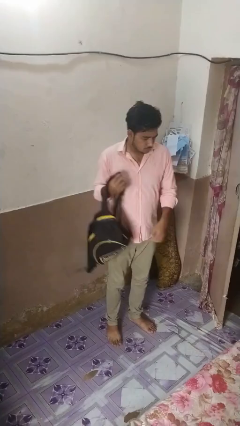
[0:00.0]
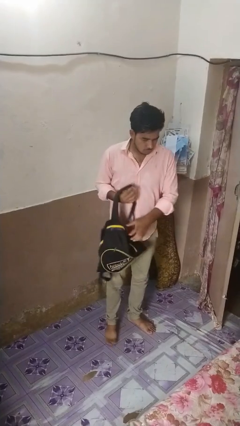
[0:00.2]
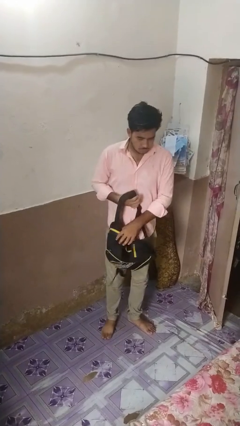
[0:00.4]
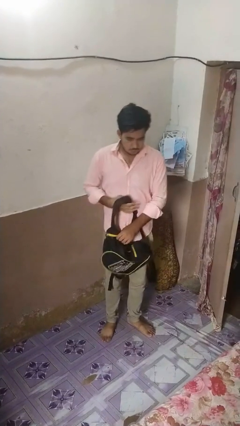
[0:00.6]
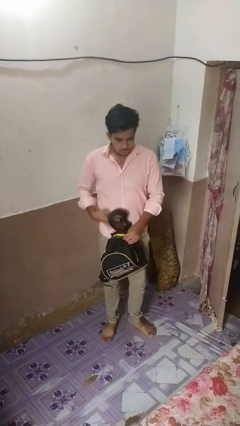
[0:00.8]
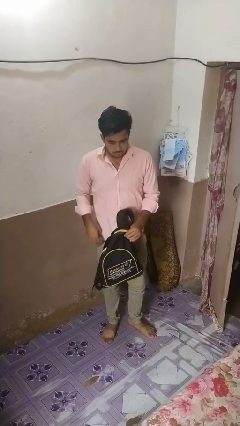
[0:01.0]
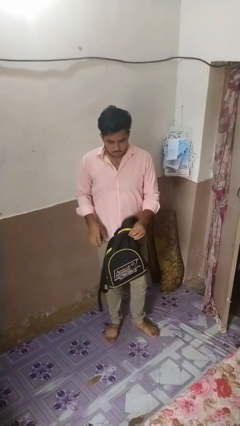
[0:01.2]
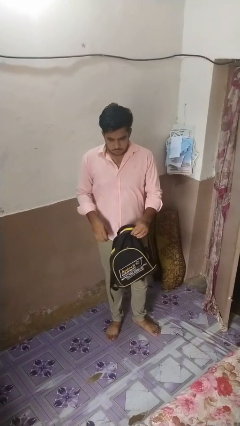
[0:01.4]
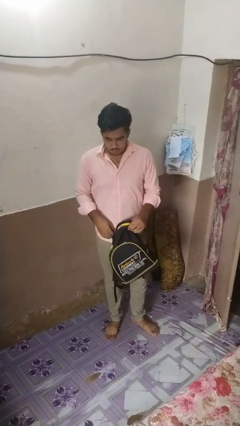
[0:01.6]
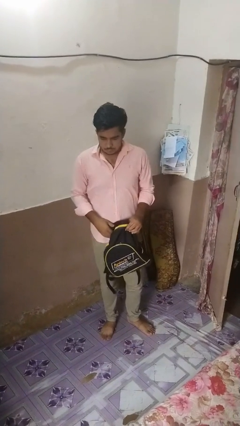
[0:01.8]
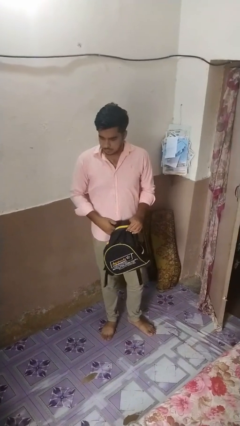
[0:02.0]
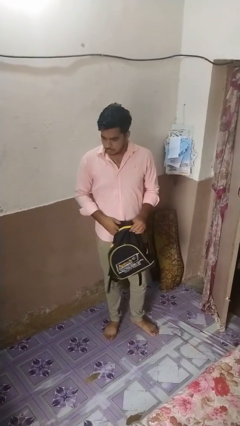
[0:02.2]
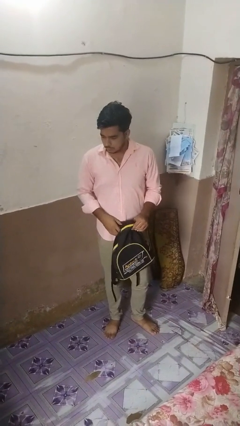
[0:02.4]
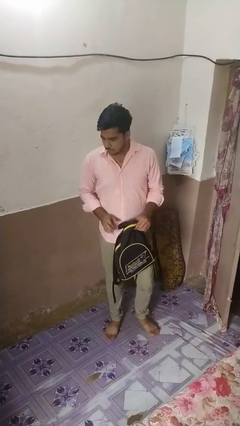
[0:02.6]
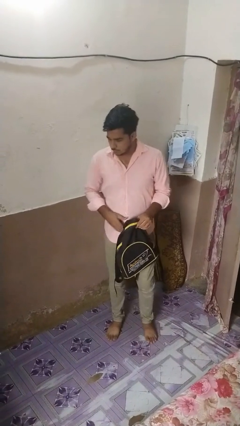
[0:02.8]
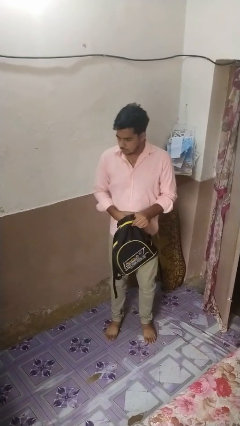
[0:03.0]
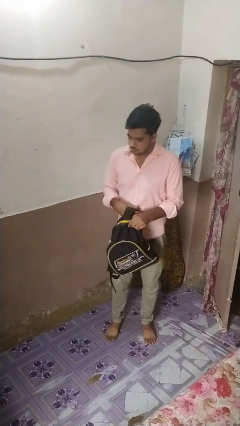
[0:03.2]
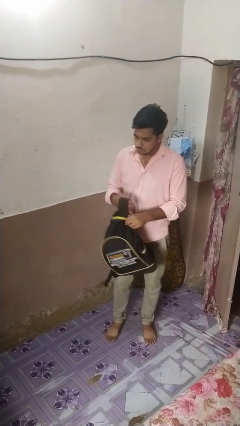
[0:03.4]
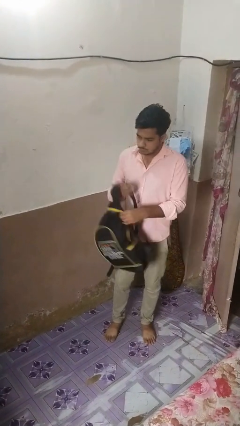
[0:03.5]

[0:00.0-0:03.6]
person takes off backpack

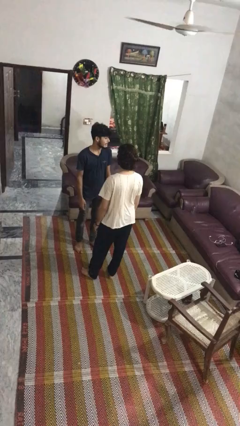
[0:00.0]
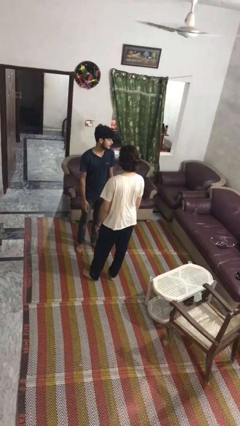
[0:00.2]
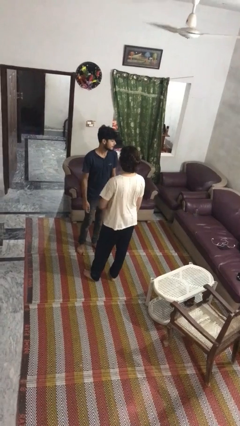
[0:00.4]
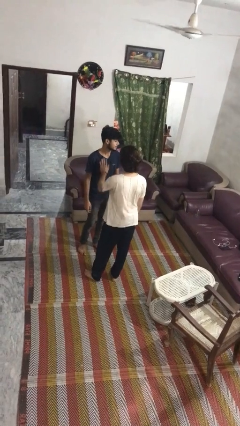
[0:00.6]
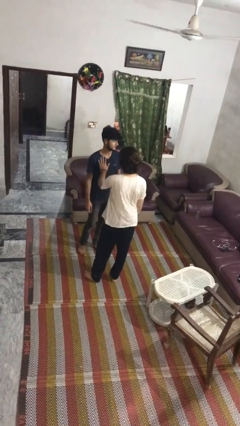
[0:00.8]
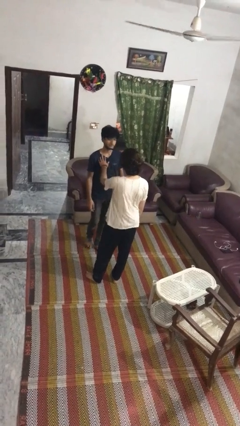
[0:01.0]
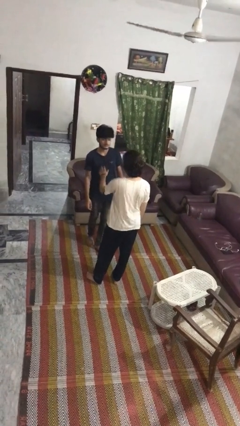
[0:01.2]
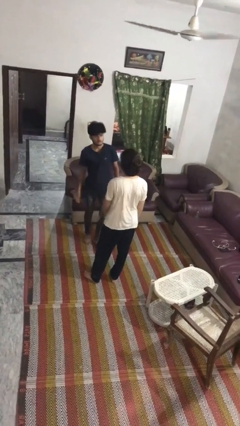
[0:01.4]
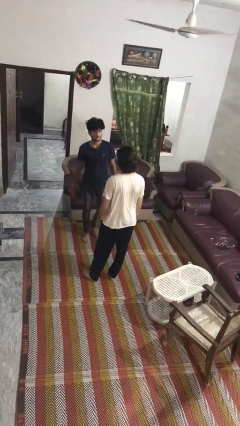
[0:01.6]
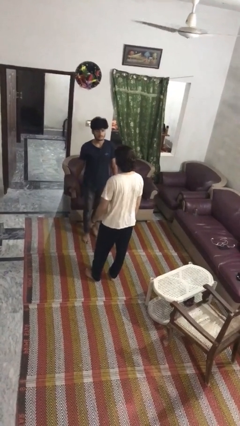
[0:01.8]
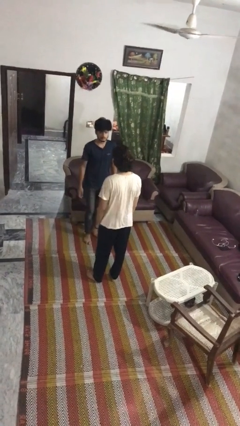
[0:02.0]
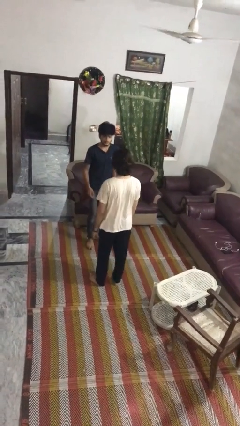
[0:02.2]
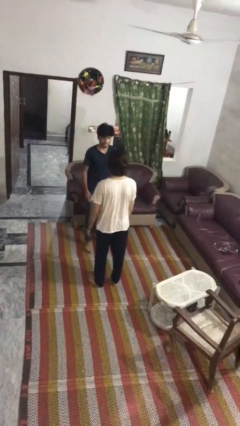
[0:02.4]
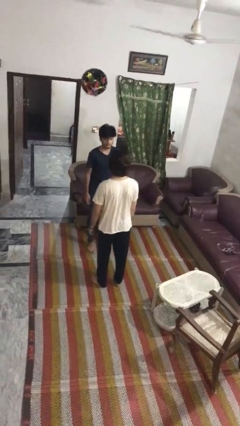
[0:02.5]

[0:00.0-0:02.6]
person shoves person

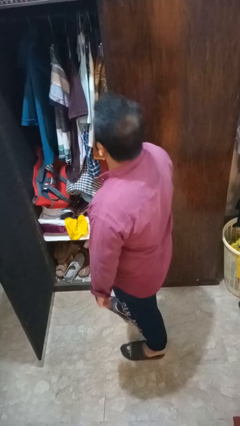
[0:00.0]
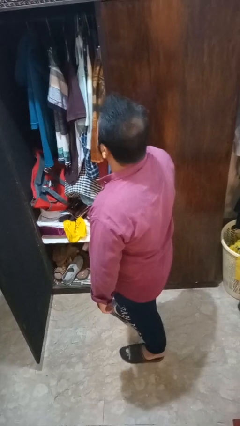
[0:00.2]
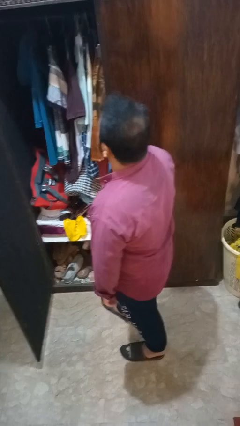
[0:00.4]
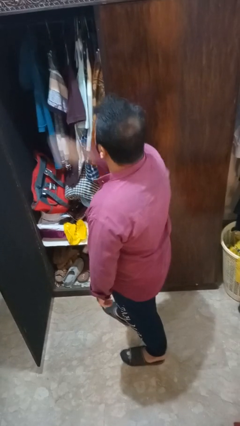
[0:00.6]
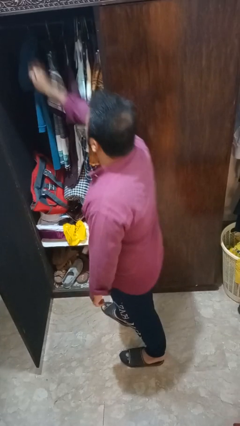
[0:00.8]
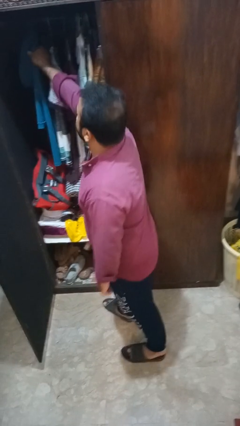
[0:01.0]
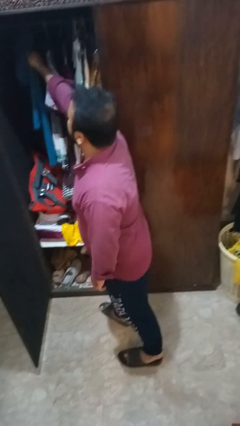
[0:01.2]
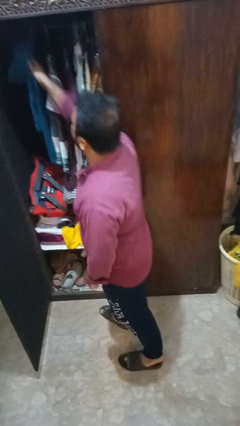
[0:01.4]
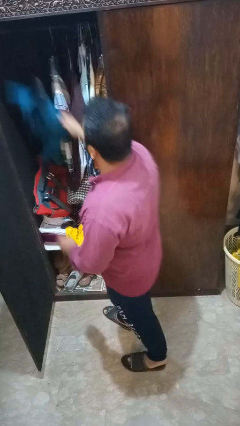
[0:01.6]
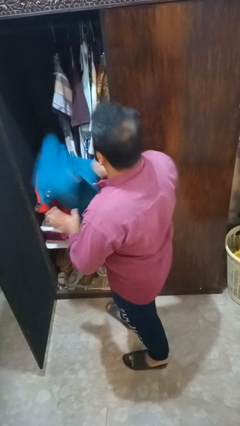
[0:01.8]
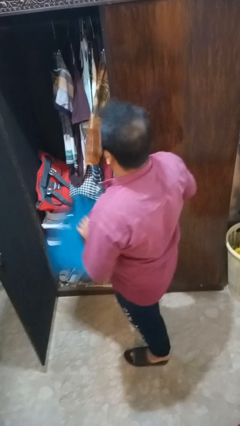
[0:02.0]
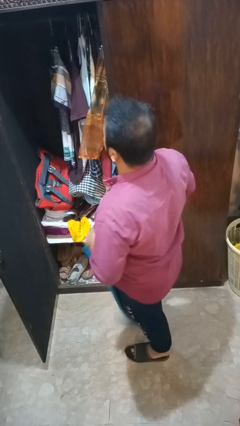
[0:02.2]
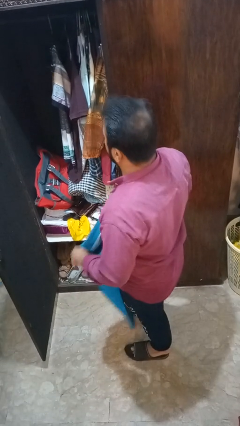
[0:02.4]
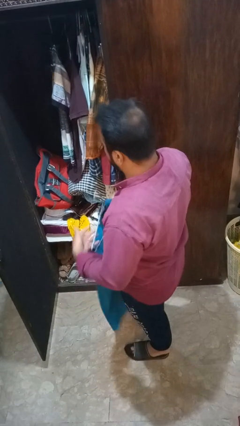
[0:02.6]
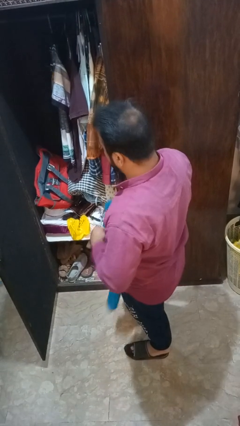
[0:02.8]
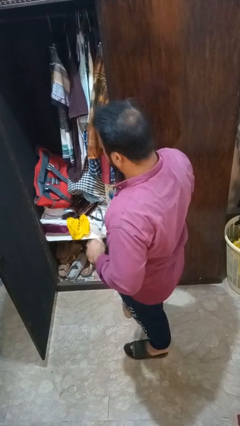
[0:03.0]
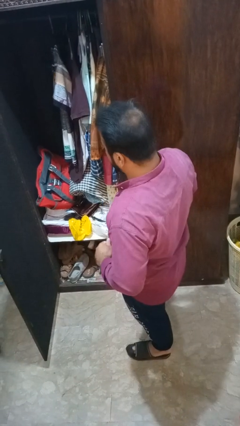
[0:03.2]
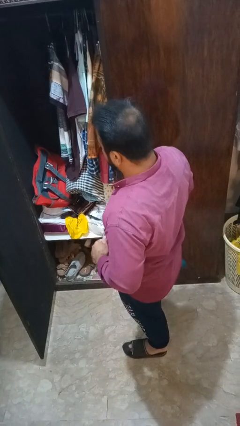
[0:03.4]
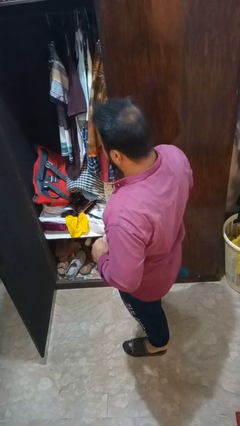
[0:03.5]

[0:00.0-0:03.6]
person takes clothes from closet

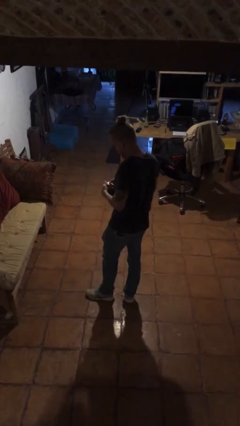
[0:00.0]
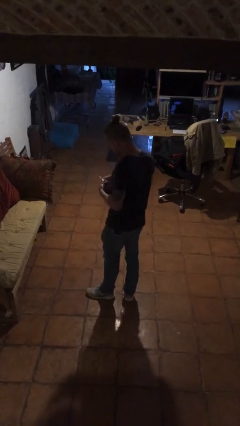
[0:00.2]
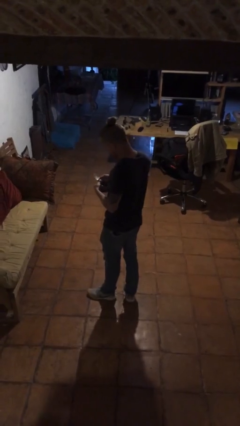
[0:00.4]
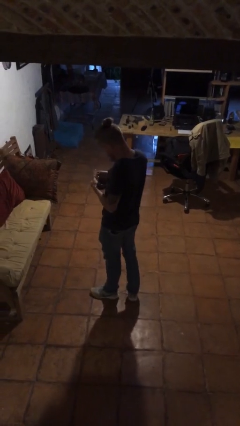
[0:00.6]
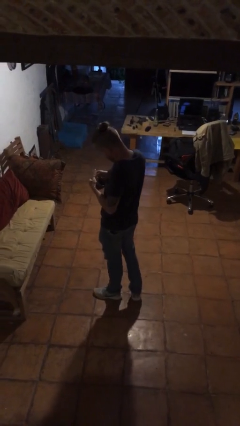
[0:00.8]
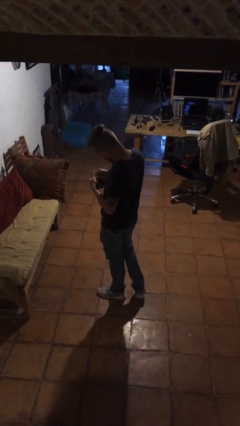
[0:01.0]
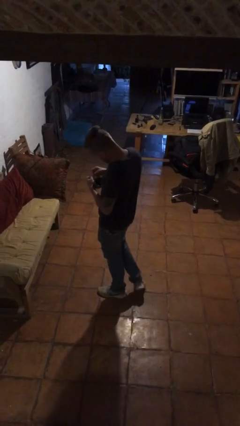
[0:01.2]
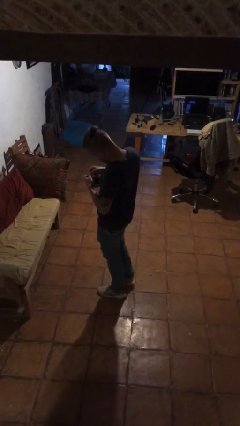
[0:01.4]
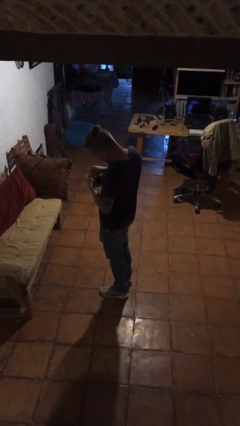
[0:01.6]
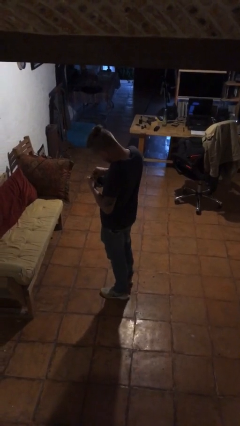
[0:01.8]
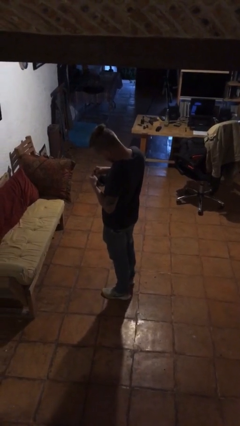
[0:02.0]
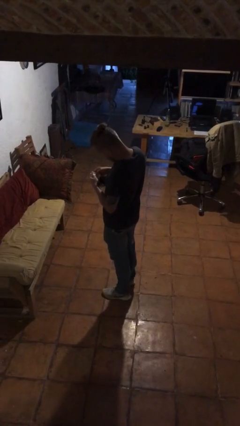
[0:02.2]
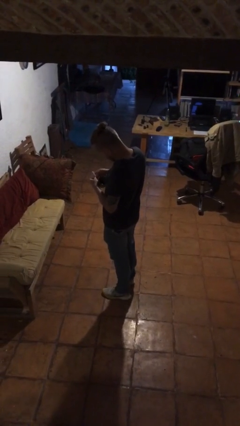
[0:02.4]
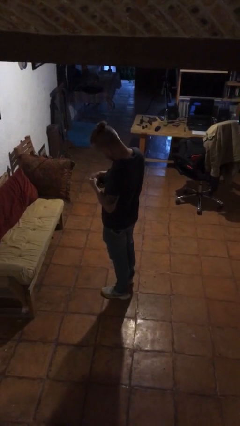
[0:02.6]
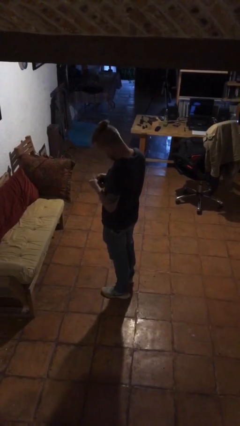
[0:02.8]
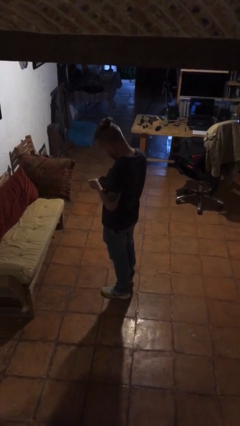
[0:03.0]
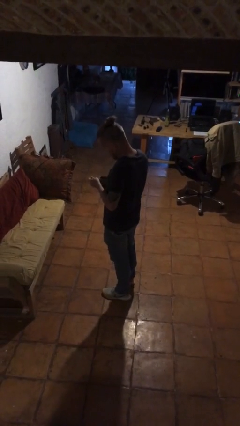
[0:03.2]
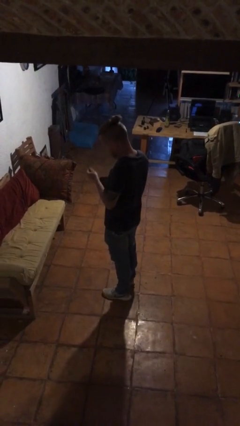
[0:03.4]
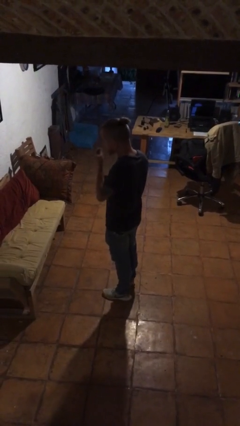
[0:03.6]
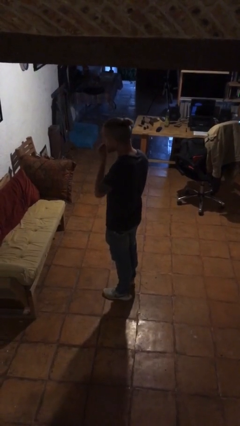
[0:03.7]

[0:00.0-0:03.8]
person takes medicine pills

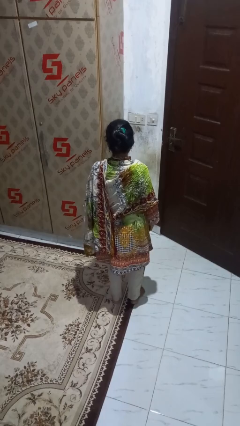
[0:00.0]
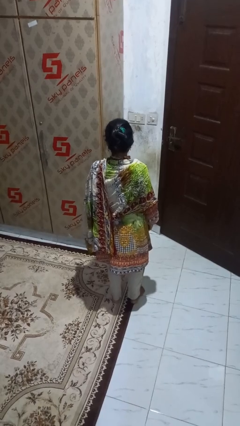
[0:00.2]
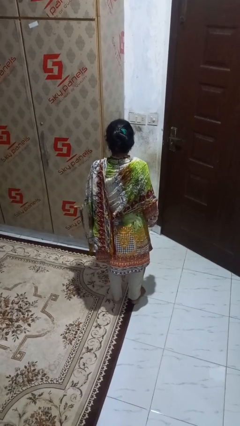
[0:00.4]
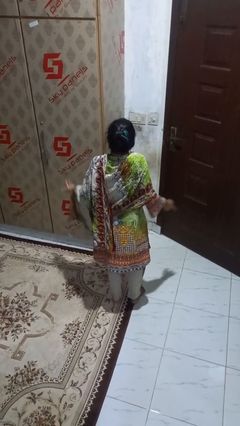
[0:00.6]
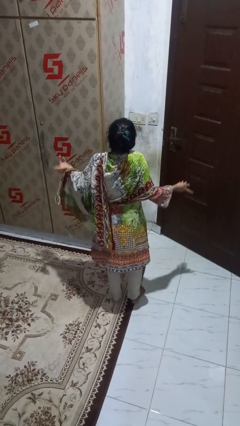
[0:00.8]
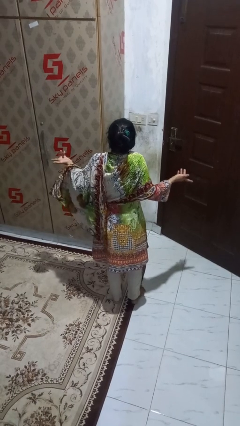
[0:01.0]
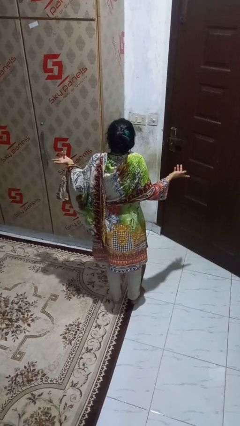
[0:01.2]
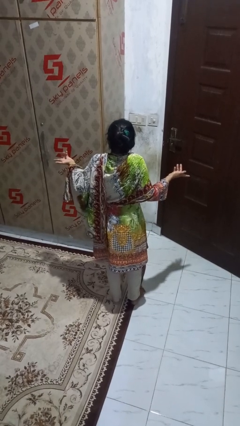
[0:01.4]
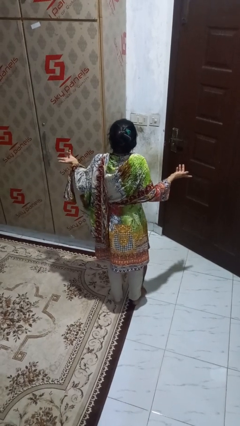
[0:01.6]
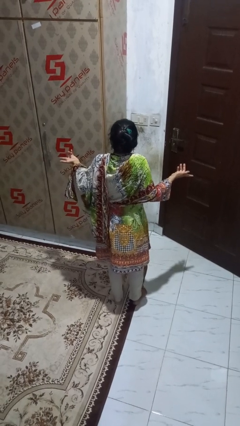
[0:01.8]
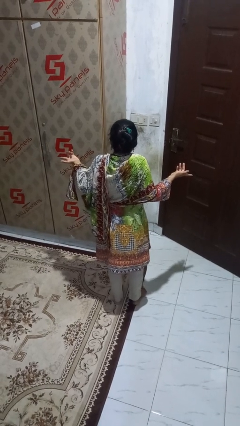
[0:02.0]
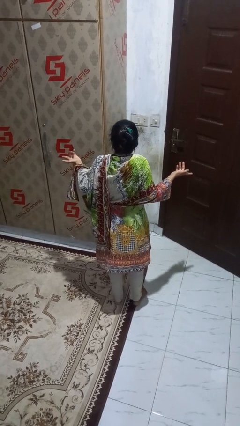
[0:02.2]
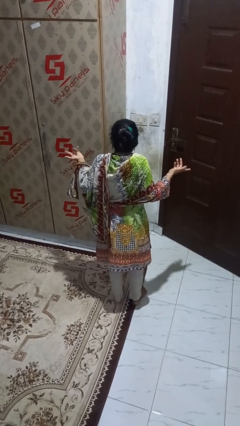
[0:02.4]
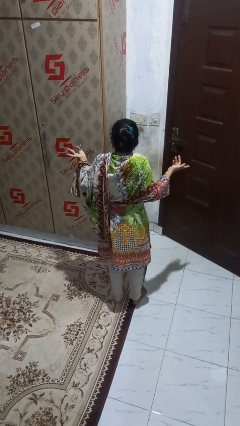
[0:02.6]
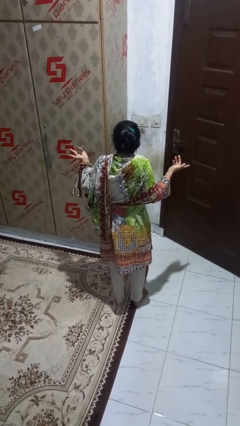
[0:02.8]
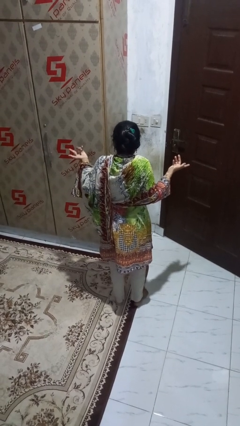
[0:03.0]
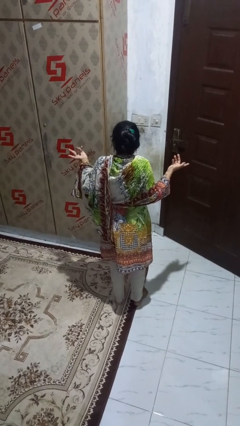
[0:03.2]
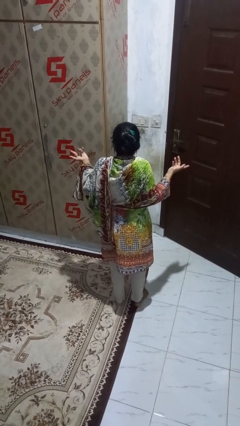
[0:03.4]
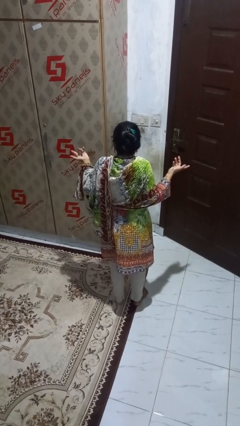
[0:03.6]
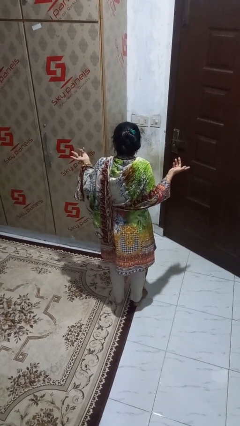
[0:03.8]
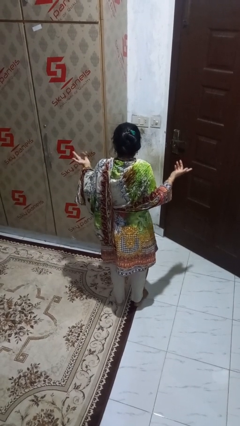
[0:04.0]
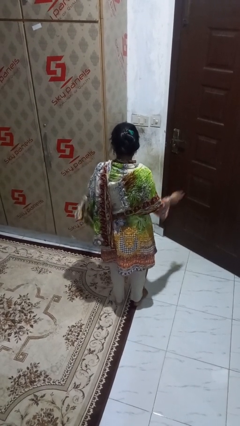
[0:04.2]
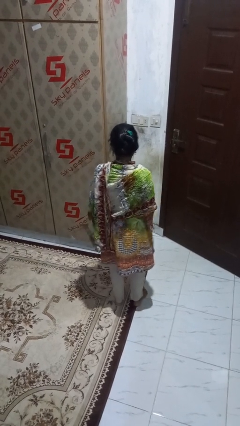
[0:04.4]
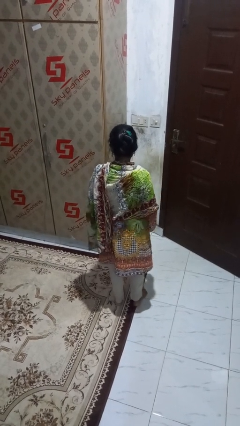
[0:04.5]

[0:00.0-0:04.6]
person shrugs
